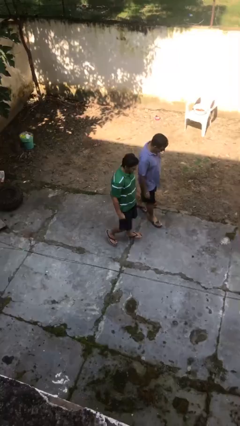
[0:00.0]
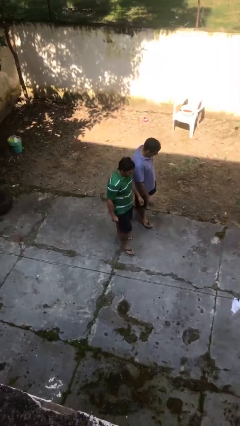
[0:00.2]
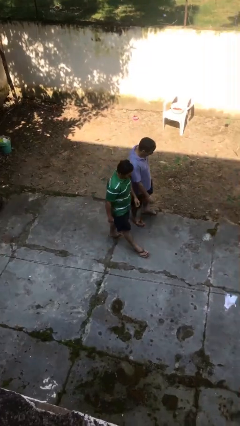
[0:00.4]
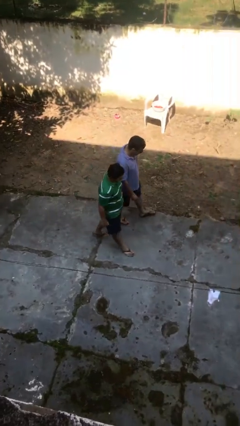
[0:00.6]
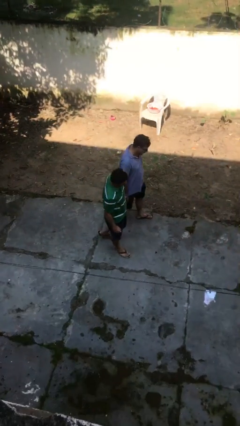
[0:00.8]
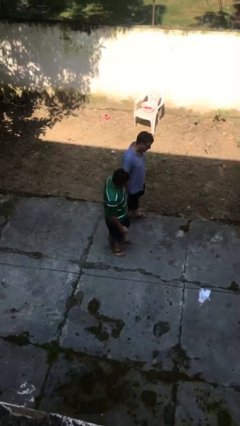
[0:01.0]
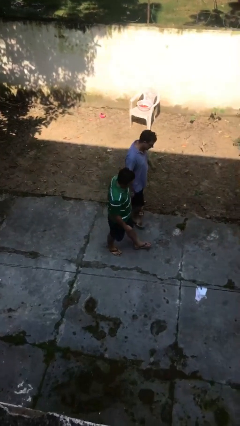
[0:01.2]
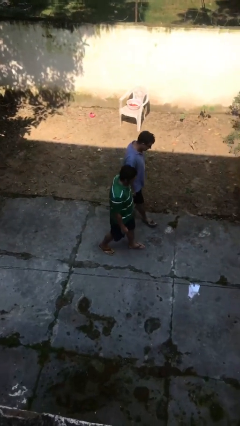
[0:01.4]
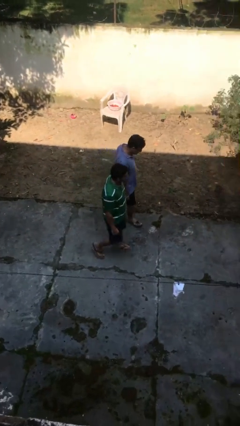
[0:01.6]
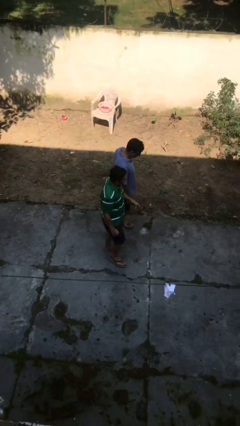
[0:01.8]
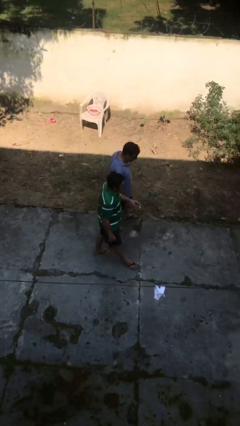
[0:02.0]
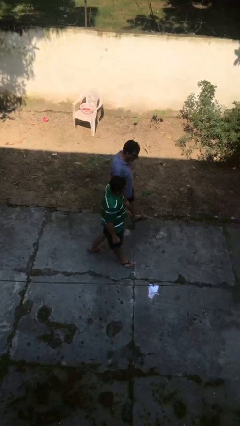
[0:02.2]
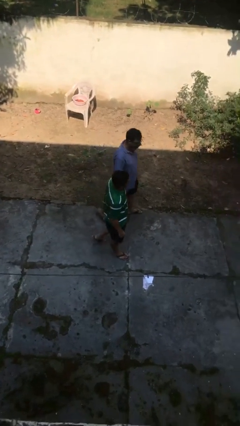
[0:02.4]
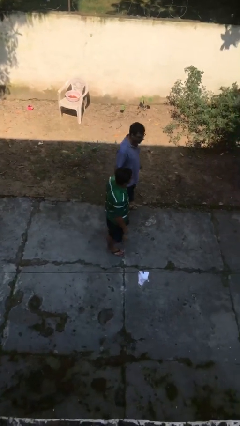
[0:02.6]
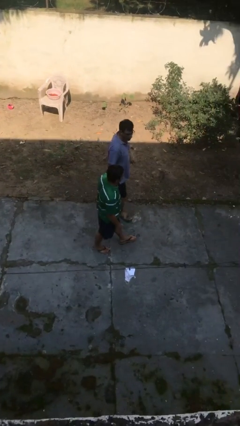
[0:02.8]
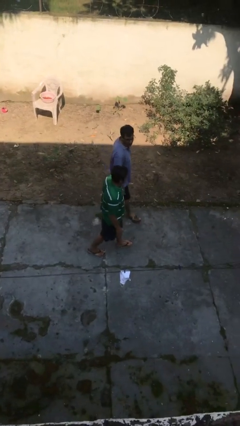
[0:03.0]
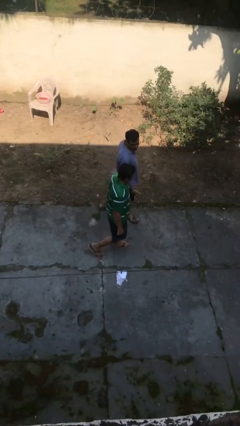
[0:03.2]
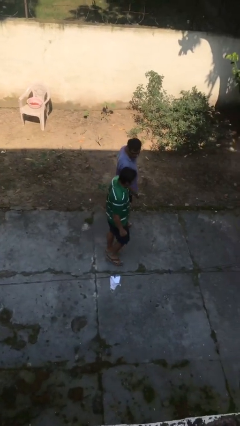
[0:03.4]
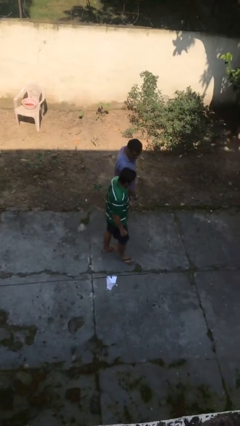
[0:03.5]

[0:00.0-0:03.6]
person talks to person

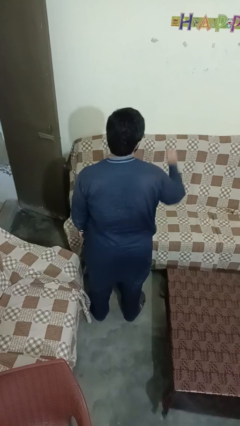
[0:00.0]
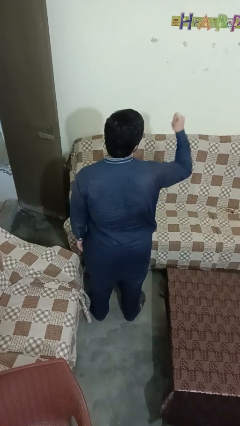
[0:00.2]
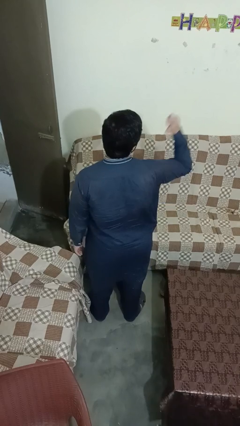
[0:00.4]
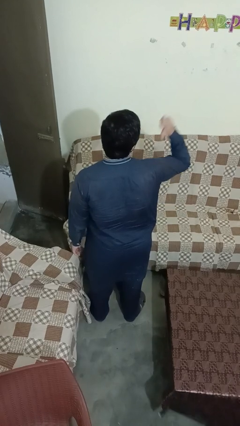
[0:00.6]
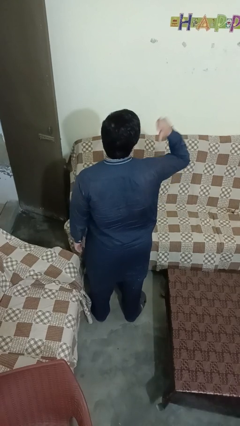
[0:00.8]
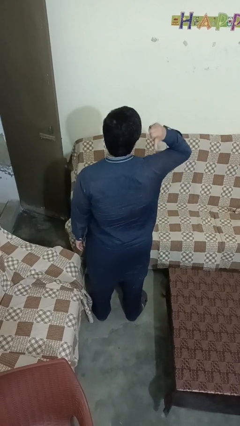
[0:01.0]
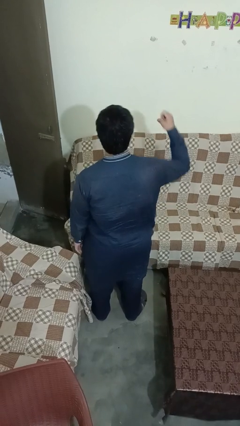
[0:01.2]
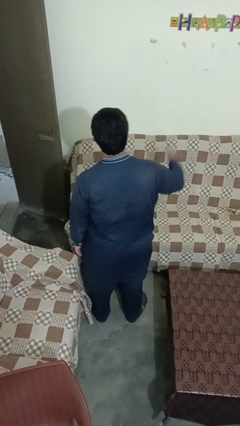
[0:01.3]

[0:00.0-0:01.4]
person gestures behind me

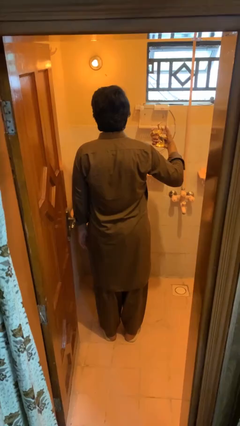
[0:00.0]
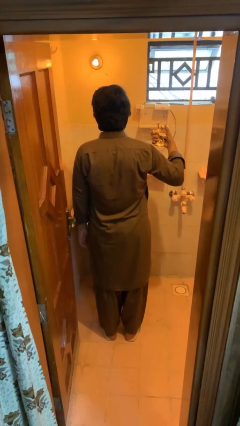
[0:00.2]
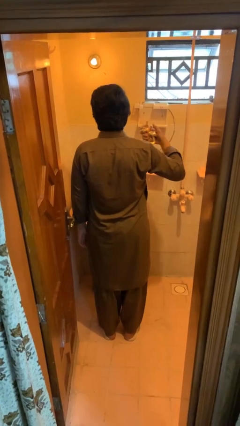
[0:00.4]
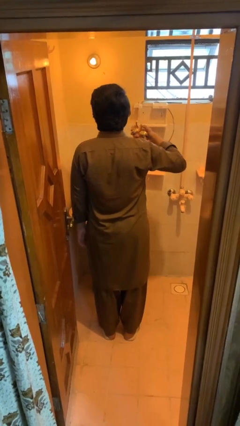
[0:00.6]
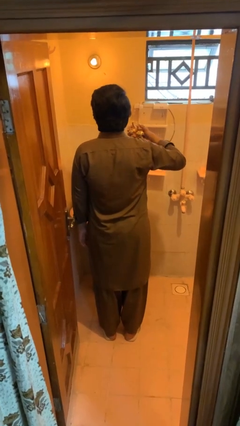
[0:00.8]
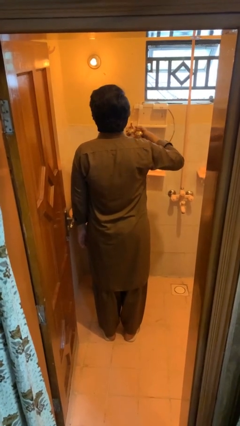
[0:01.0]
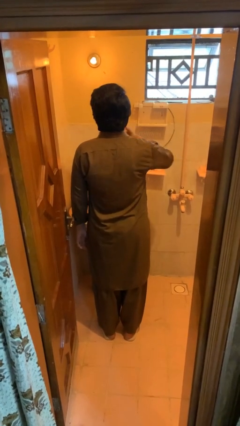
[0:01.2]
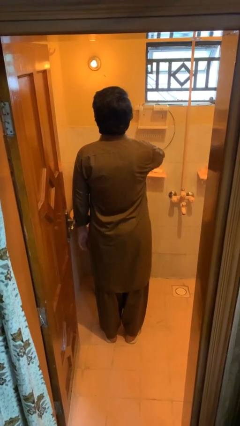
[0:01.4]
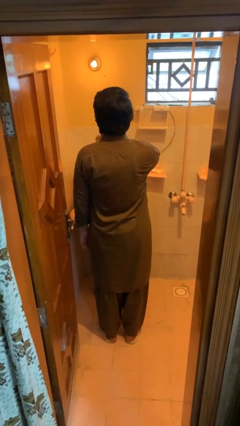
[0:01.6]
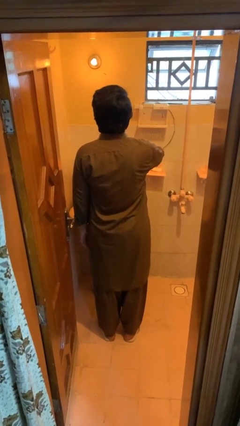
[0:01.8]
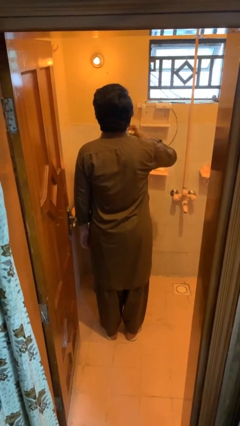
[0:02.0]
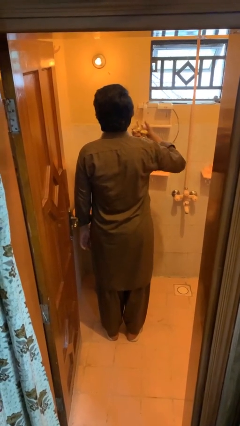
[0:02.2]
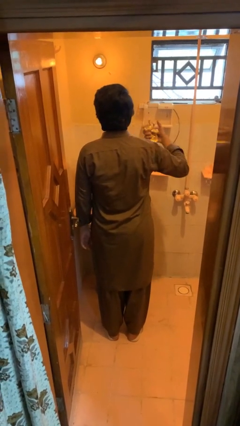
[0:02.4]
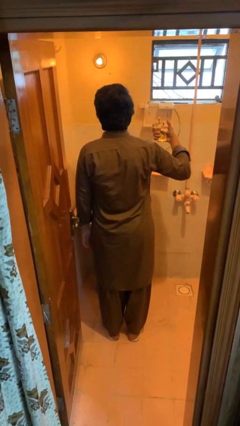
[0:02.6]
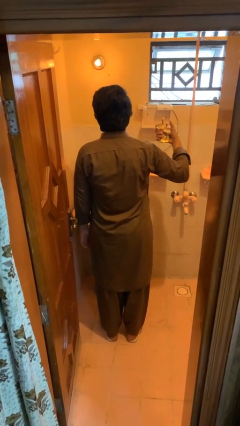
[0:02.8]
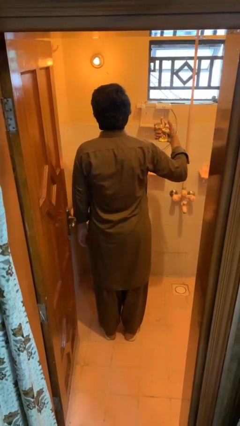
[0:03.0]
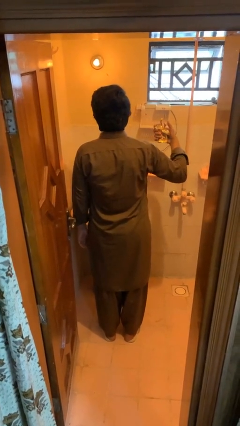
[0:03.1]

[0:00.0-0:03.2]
person applies deodorant

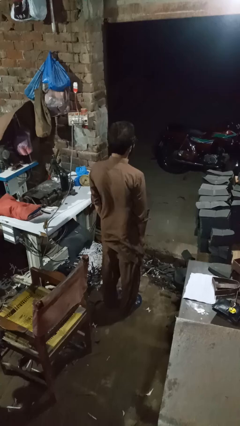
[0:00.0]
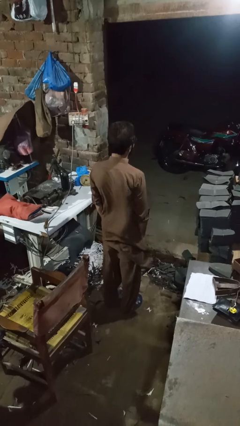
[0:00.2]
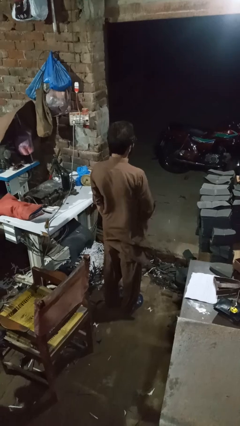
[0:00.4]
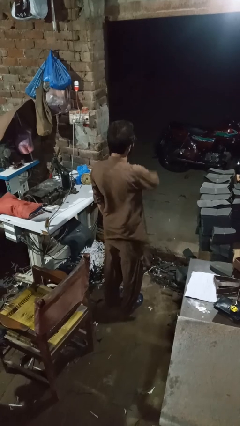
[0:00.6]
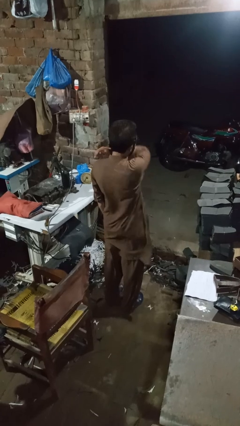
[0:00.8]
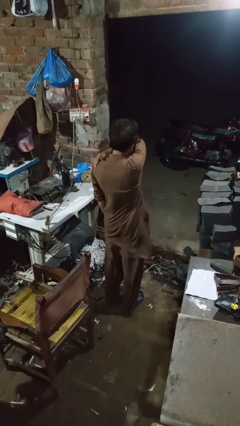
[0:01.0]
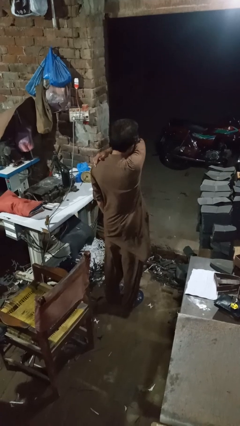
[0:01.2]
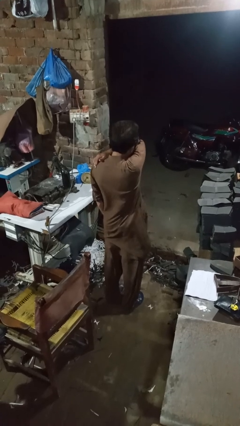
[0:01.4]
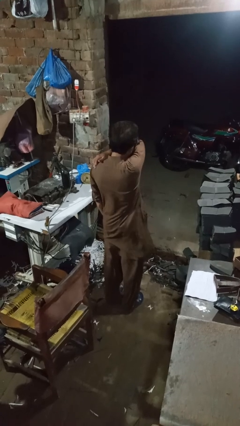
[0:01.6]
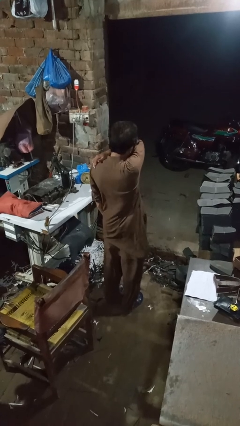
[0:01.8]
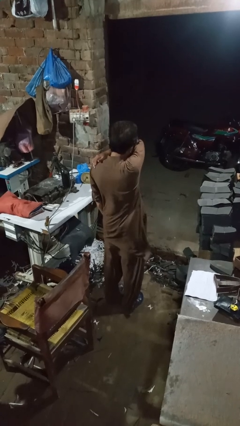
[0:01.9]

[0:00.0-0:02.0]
person sneezes into arm

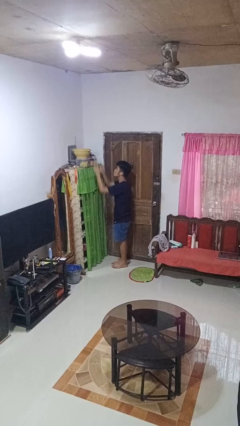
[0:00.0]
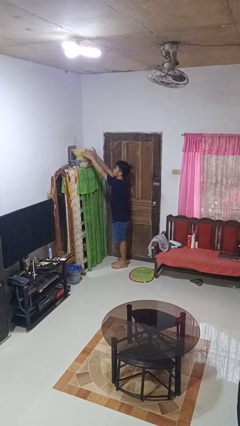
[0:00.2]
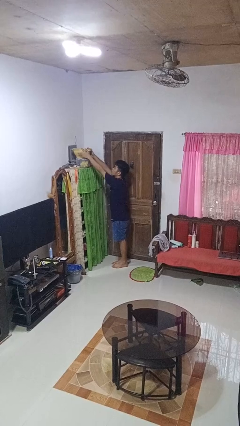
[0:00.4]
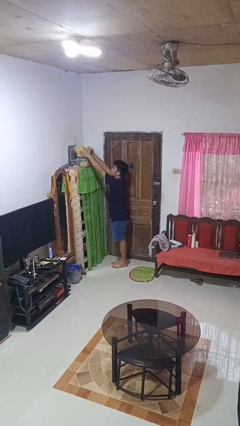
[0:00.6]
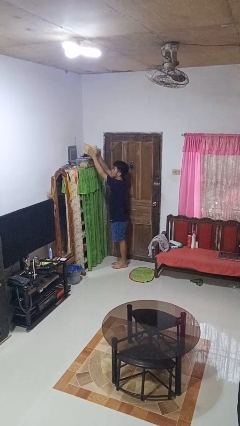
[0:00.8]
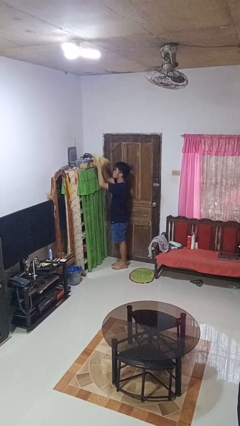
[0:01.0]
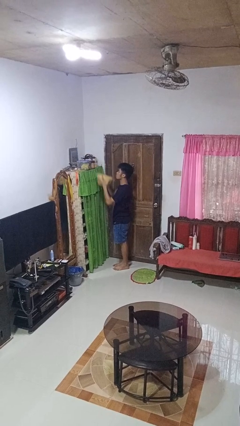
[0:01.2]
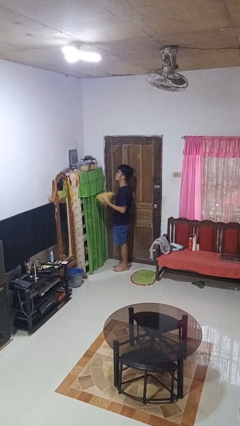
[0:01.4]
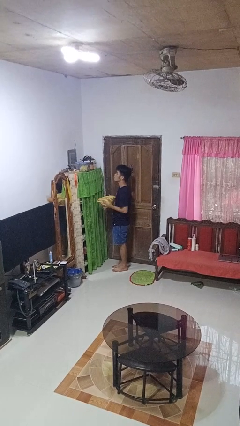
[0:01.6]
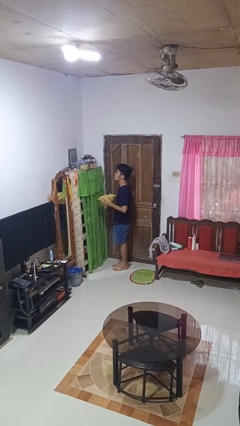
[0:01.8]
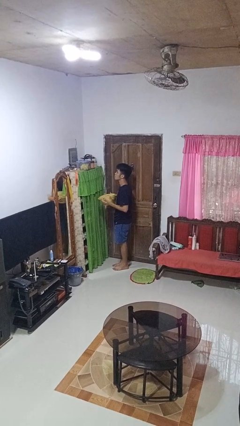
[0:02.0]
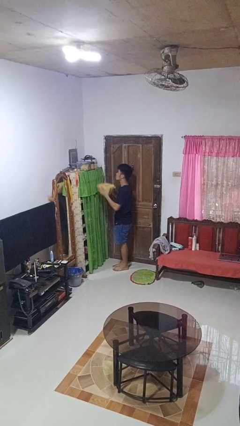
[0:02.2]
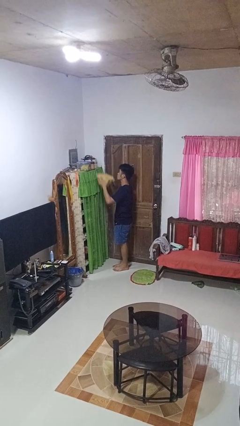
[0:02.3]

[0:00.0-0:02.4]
person picks up object from shelf

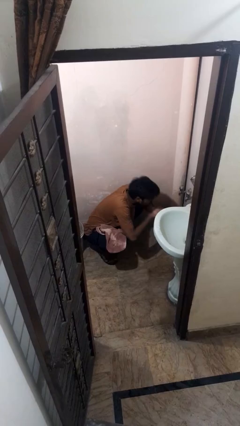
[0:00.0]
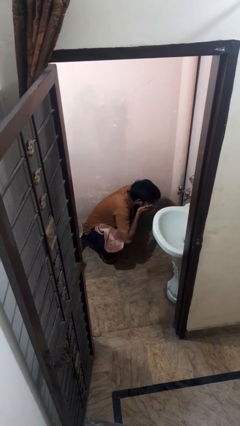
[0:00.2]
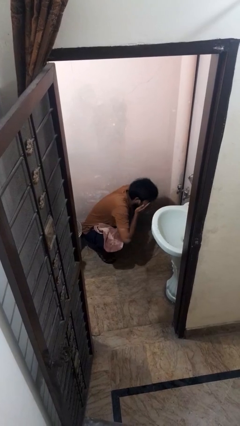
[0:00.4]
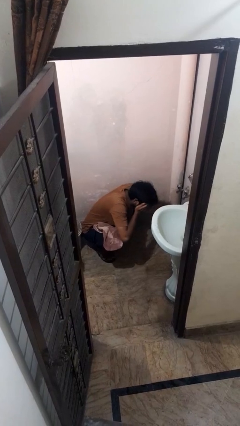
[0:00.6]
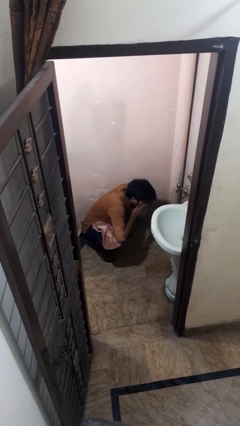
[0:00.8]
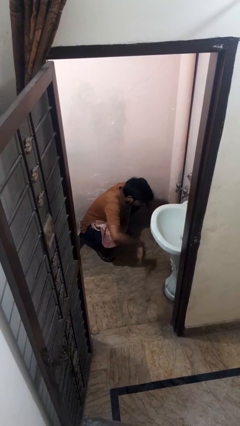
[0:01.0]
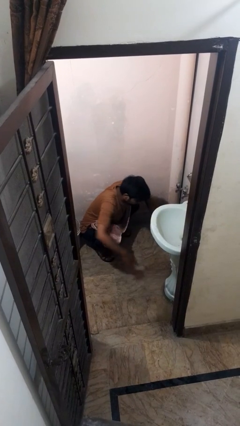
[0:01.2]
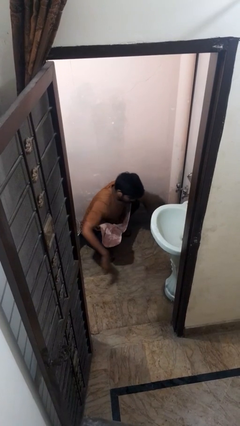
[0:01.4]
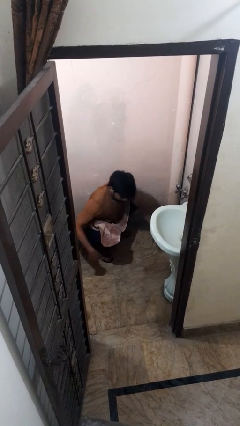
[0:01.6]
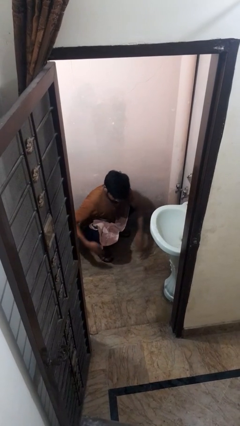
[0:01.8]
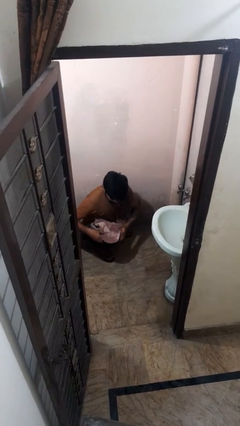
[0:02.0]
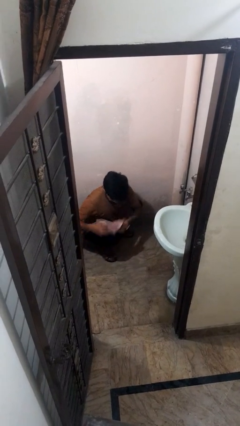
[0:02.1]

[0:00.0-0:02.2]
person throws object on bed

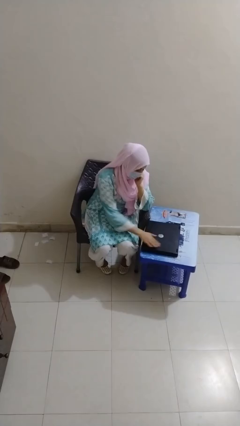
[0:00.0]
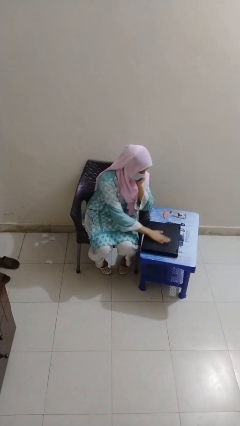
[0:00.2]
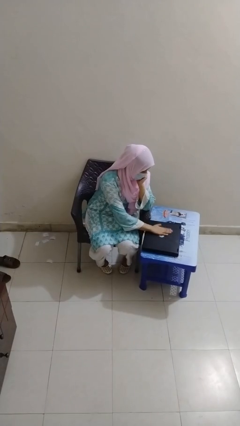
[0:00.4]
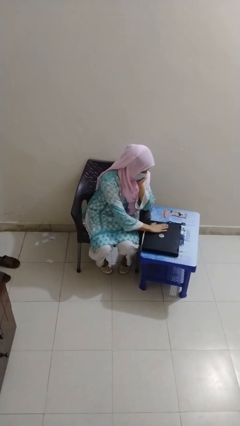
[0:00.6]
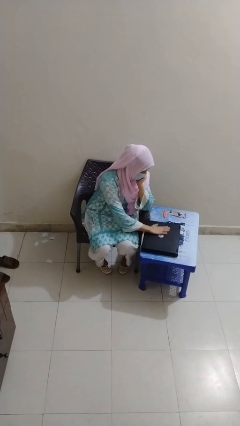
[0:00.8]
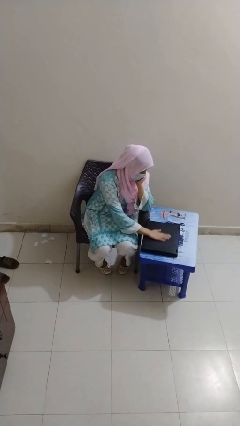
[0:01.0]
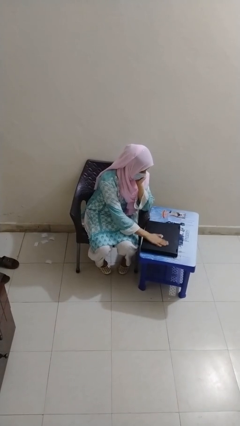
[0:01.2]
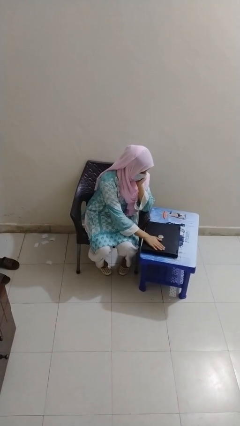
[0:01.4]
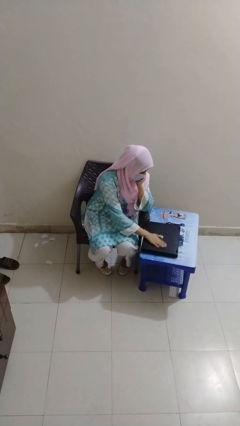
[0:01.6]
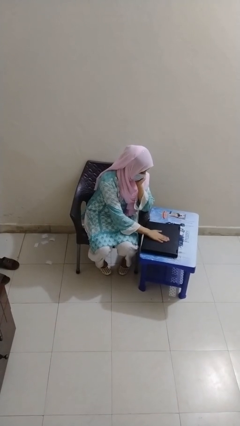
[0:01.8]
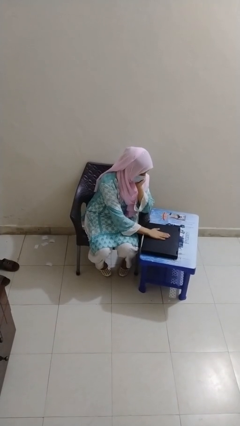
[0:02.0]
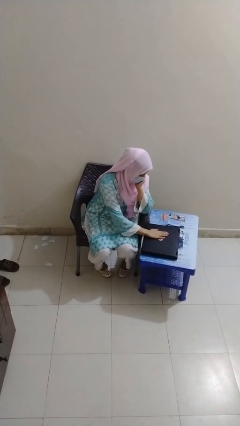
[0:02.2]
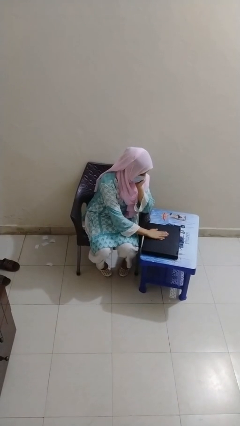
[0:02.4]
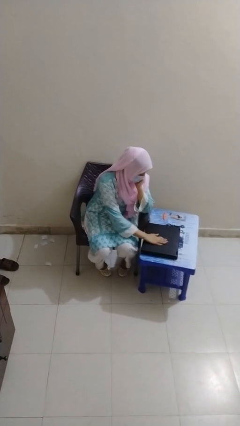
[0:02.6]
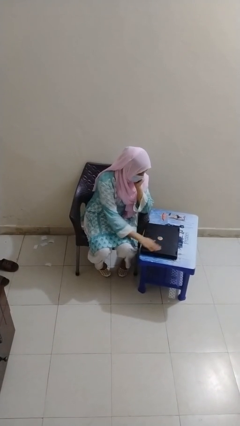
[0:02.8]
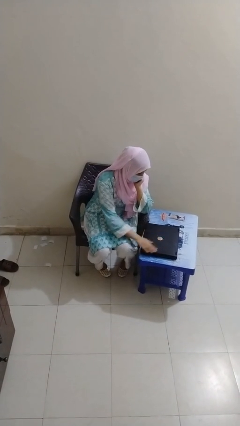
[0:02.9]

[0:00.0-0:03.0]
person waves hand over object
